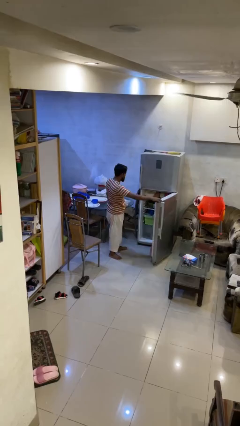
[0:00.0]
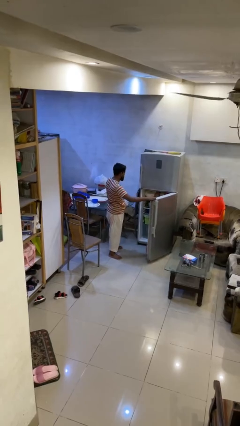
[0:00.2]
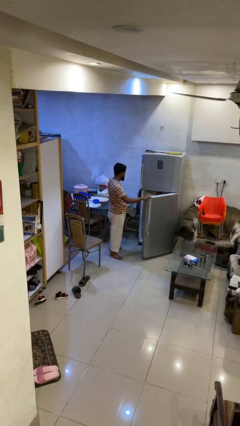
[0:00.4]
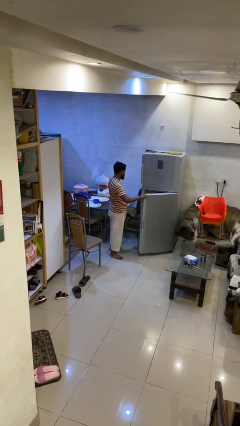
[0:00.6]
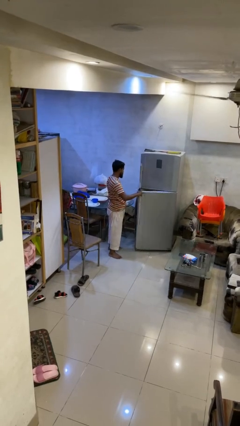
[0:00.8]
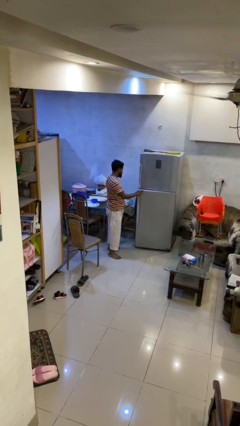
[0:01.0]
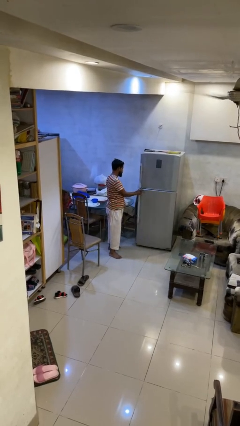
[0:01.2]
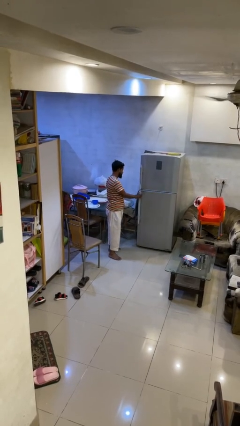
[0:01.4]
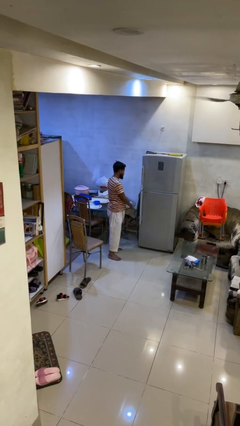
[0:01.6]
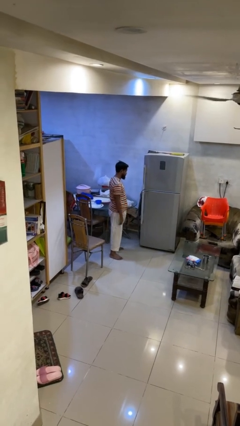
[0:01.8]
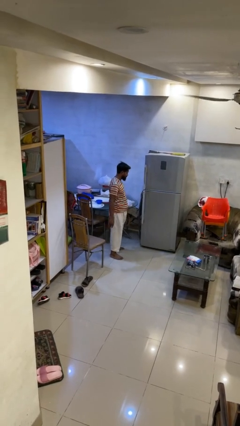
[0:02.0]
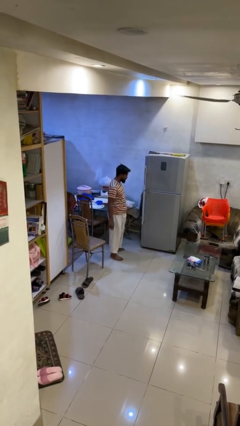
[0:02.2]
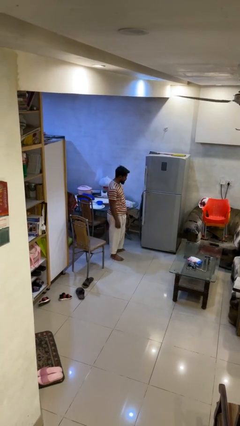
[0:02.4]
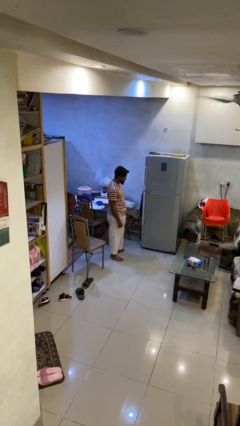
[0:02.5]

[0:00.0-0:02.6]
person closes refrigerator

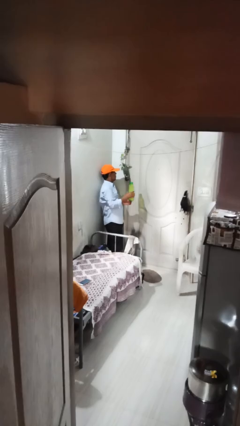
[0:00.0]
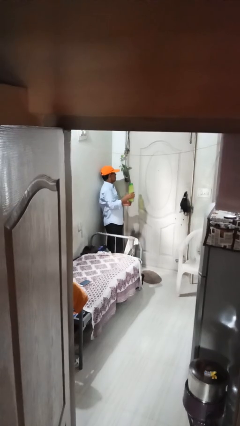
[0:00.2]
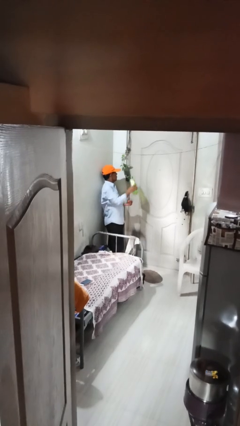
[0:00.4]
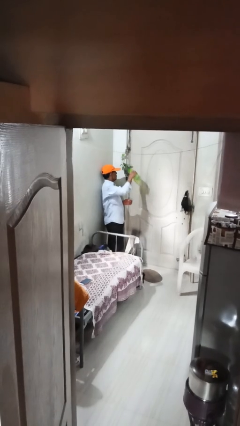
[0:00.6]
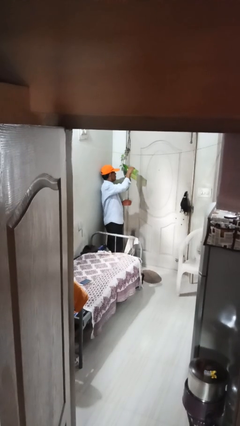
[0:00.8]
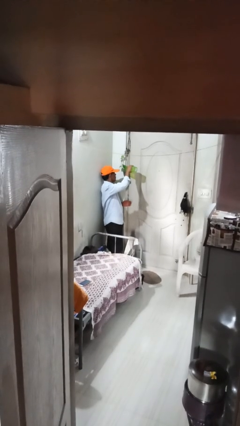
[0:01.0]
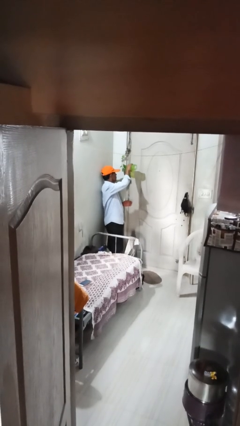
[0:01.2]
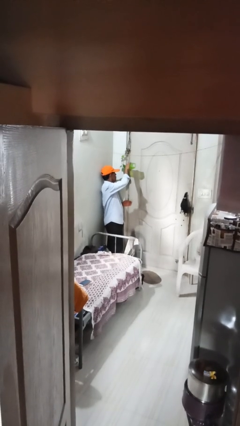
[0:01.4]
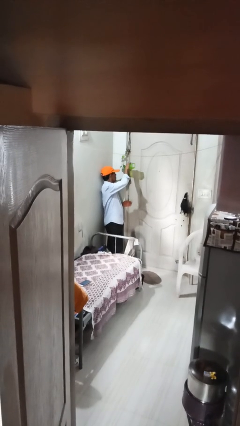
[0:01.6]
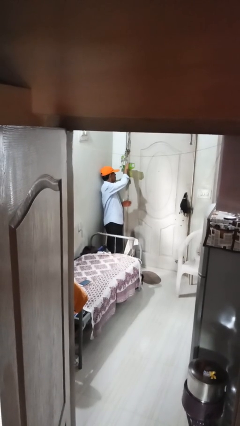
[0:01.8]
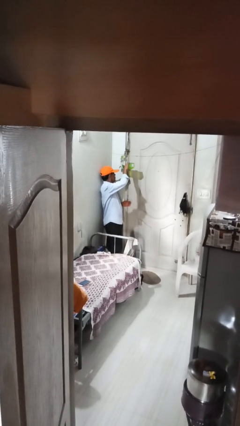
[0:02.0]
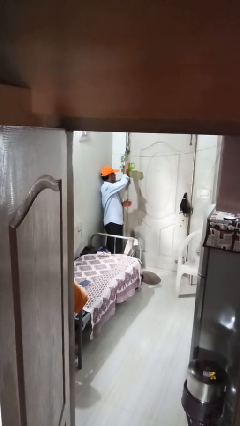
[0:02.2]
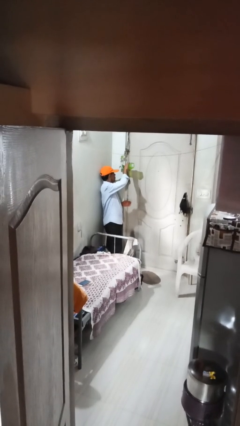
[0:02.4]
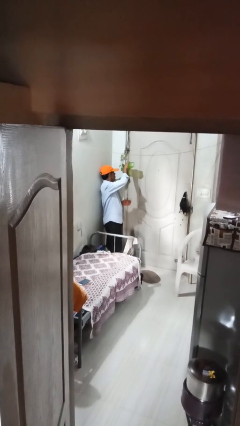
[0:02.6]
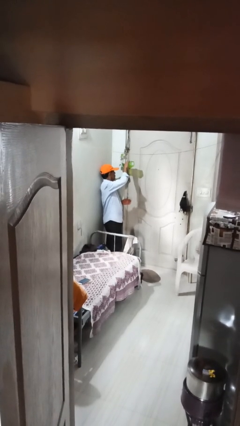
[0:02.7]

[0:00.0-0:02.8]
person waters houseplant

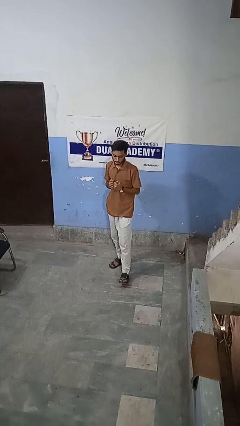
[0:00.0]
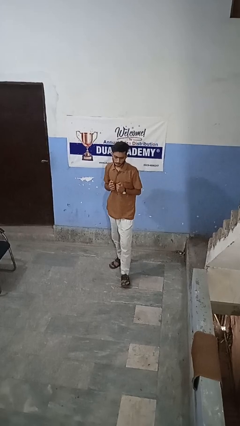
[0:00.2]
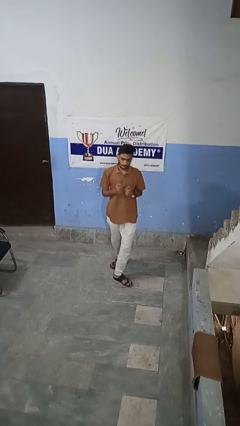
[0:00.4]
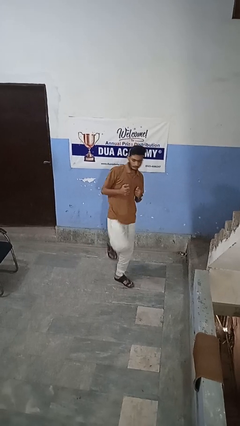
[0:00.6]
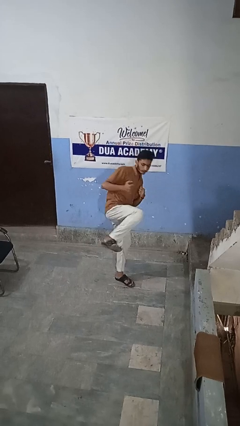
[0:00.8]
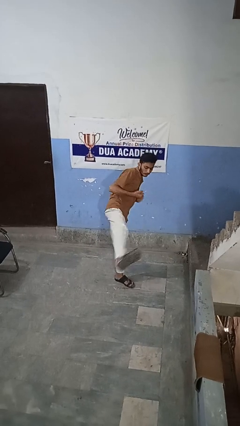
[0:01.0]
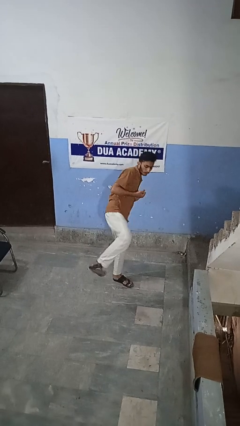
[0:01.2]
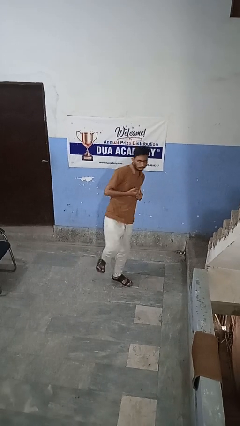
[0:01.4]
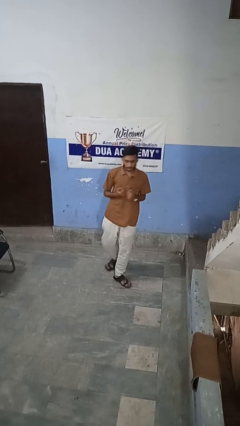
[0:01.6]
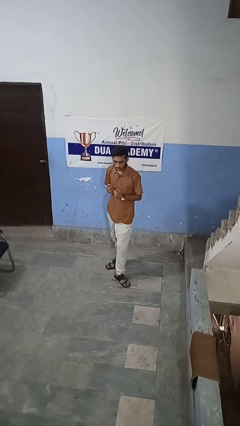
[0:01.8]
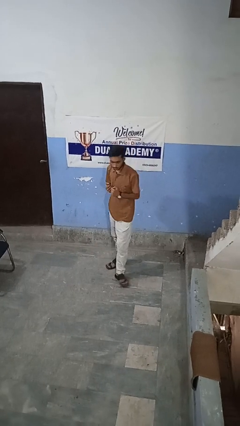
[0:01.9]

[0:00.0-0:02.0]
person karate kicks

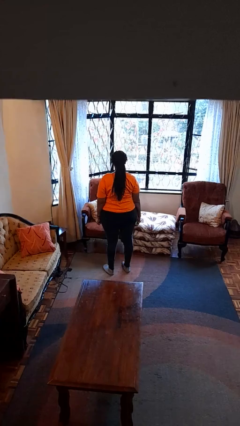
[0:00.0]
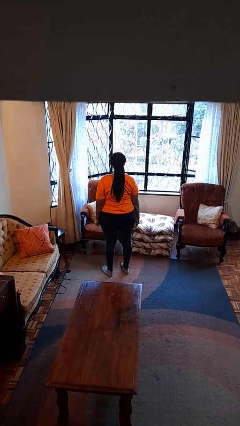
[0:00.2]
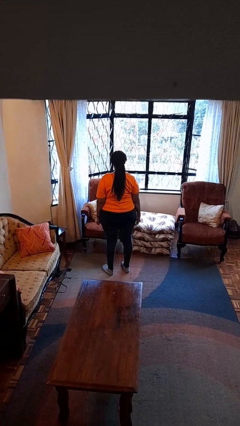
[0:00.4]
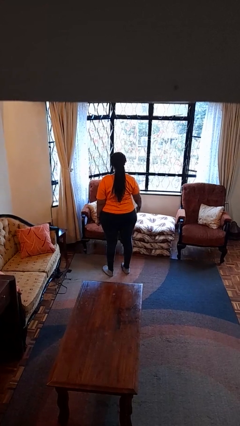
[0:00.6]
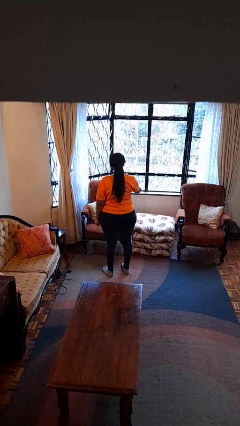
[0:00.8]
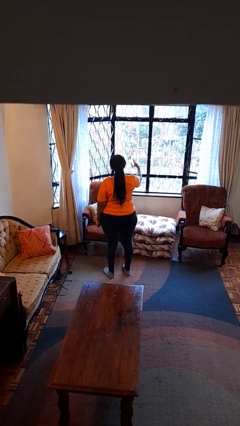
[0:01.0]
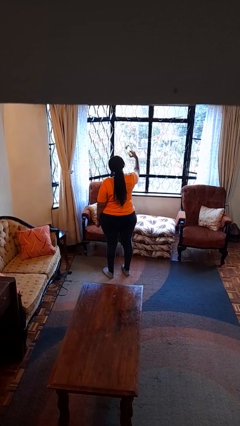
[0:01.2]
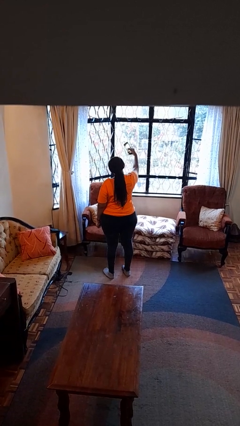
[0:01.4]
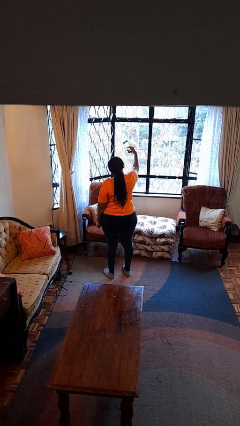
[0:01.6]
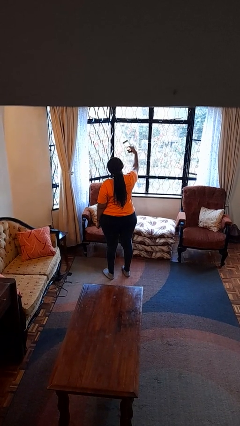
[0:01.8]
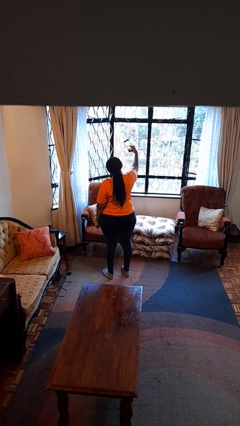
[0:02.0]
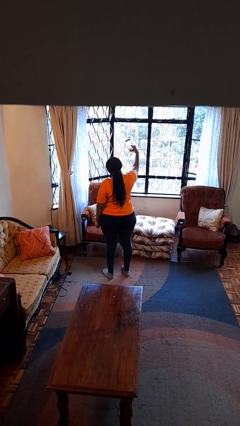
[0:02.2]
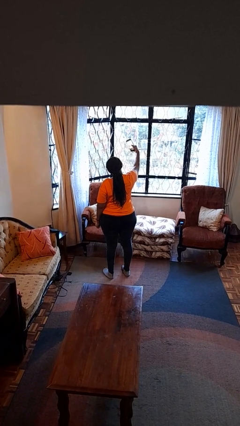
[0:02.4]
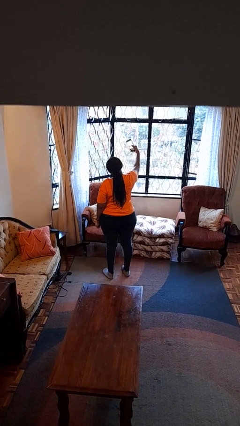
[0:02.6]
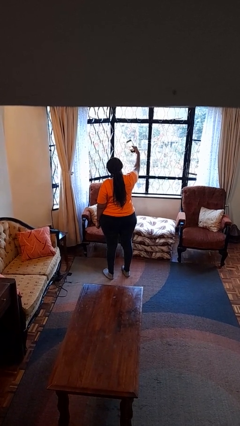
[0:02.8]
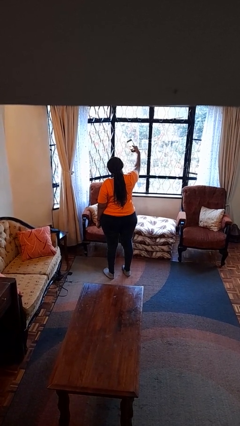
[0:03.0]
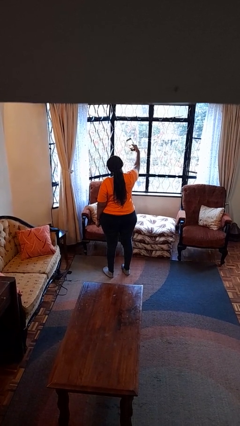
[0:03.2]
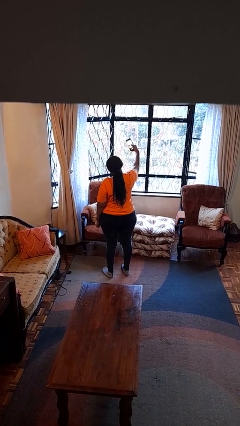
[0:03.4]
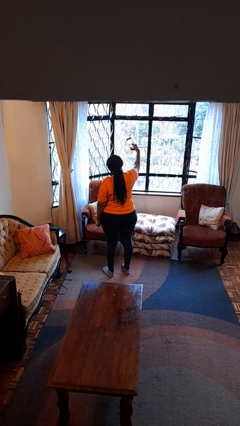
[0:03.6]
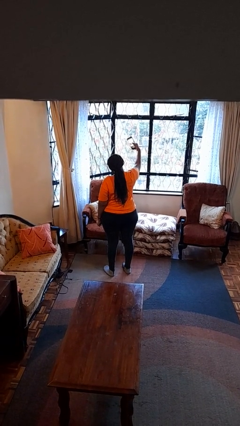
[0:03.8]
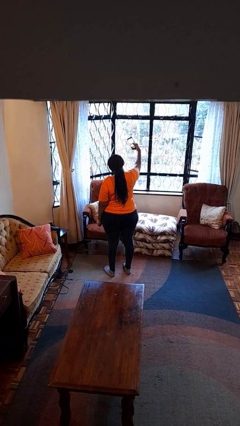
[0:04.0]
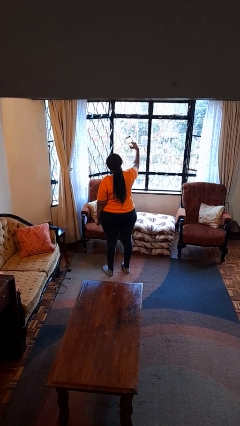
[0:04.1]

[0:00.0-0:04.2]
person takes selfie

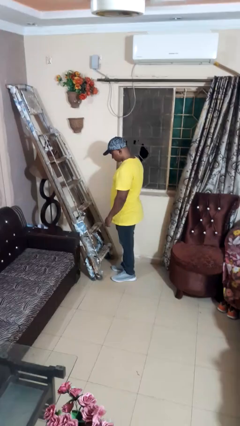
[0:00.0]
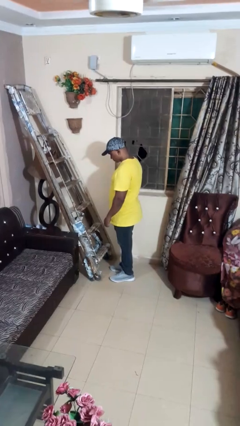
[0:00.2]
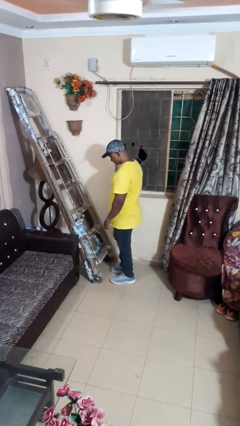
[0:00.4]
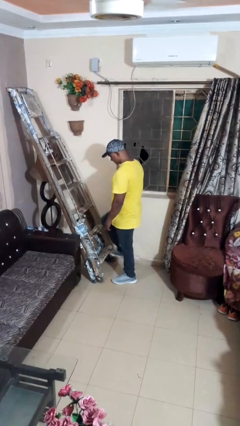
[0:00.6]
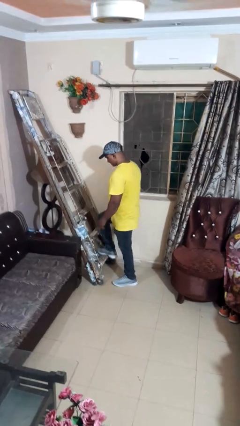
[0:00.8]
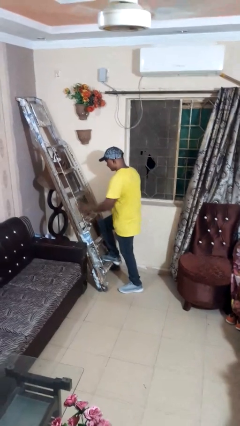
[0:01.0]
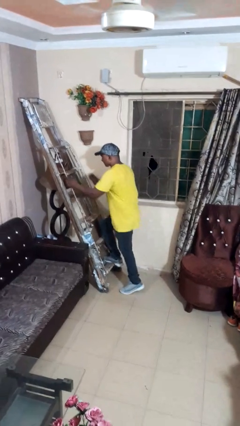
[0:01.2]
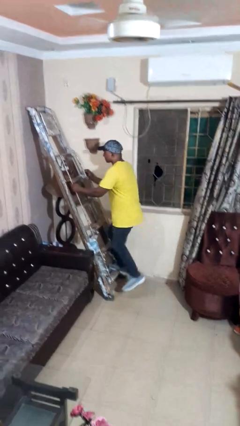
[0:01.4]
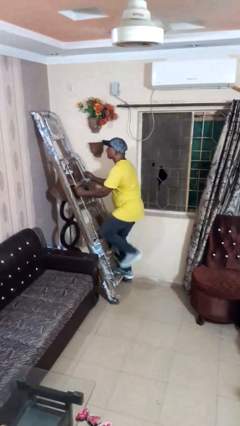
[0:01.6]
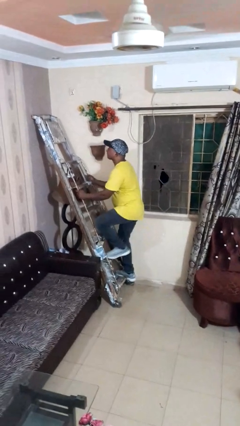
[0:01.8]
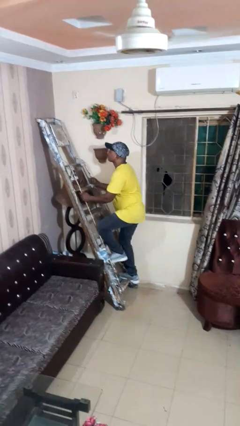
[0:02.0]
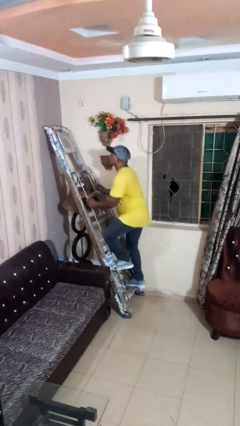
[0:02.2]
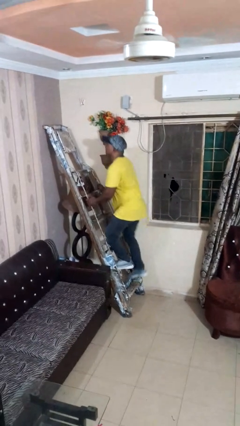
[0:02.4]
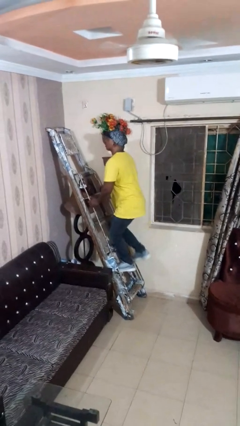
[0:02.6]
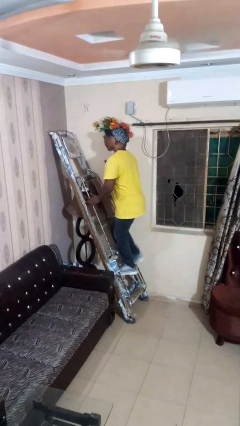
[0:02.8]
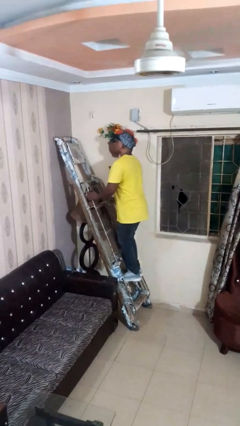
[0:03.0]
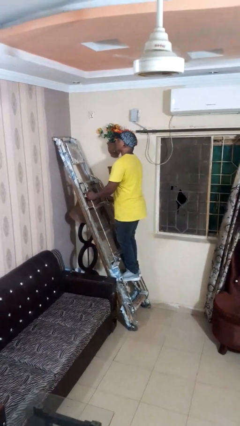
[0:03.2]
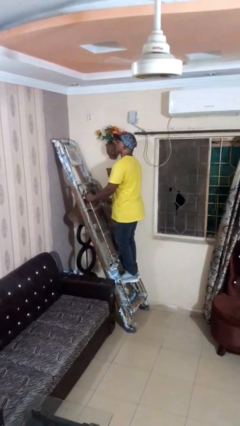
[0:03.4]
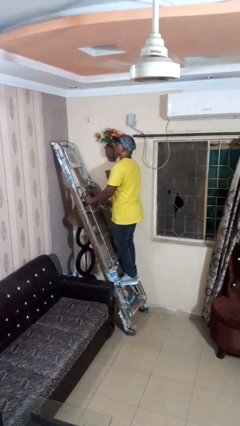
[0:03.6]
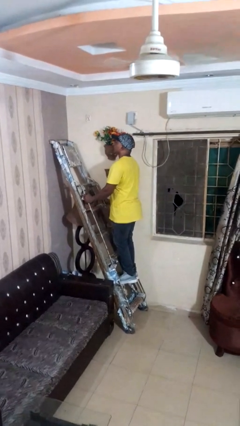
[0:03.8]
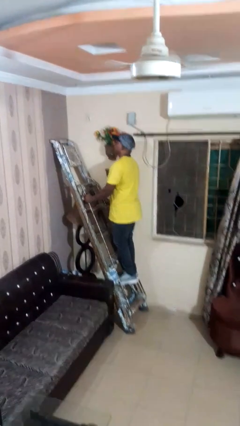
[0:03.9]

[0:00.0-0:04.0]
person climbs up ladder

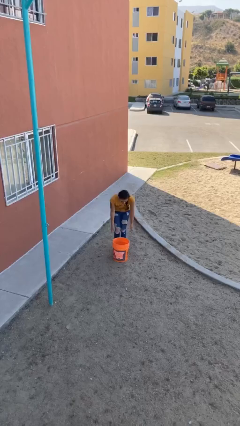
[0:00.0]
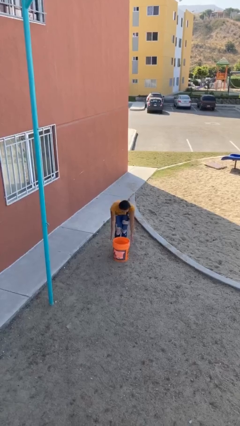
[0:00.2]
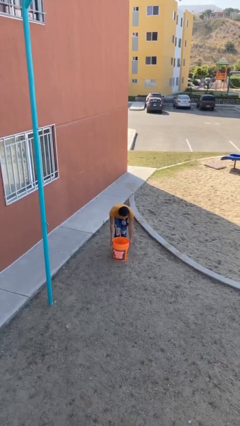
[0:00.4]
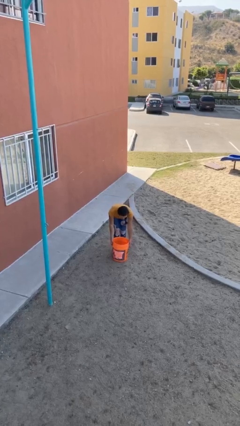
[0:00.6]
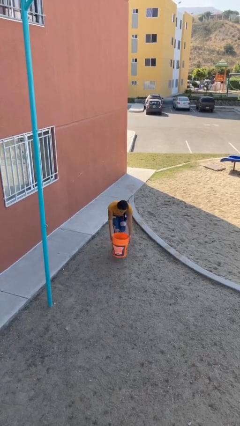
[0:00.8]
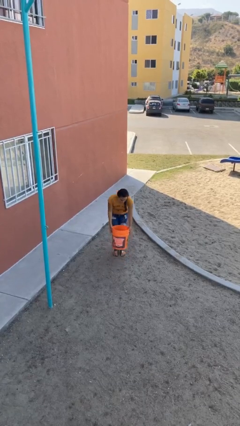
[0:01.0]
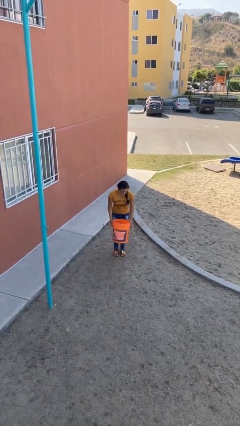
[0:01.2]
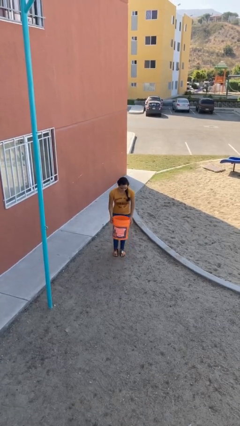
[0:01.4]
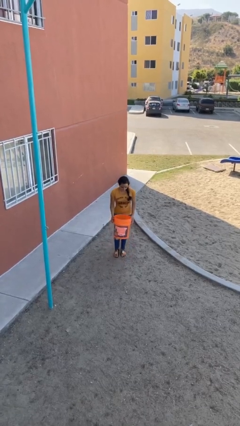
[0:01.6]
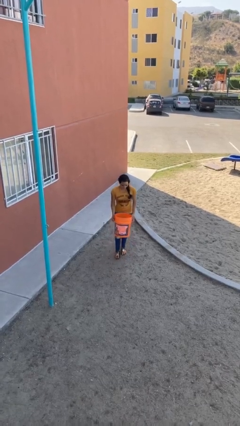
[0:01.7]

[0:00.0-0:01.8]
person picks up object from floor
